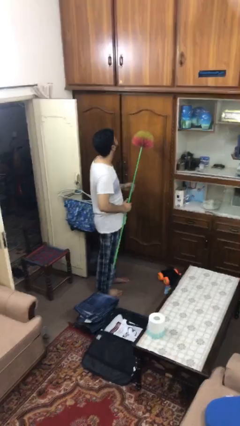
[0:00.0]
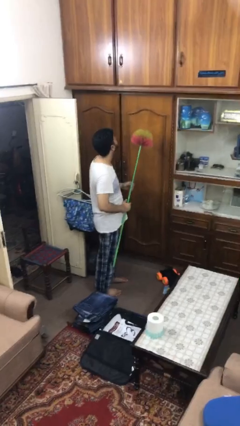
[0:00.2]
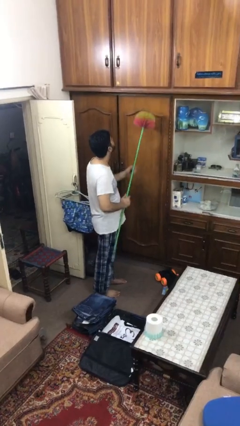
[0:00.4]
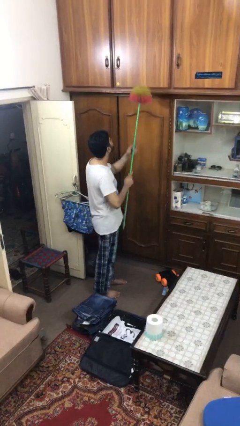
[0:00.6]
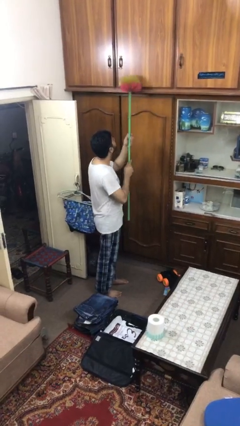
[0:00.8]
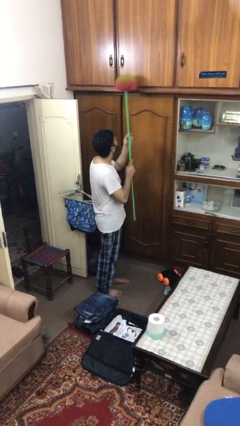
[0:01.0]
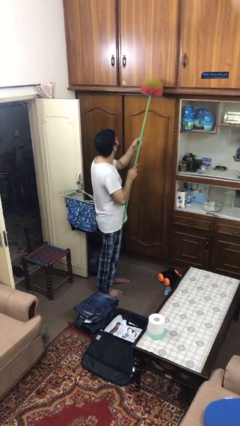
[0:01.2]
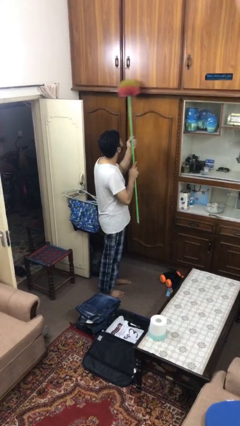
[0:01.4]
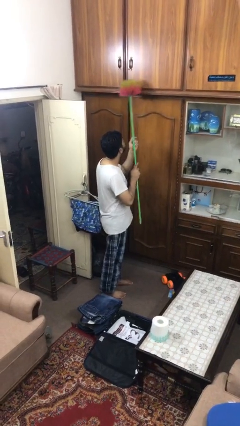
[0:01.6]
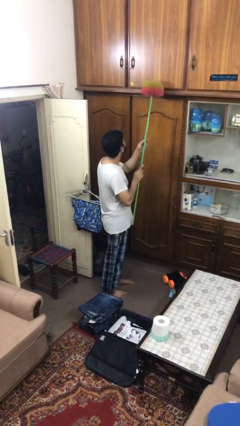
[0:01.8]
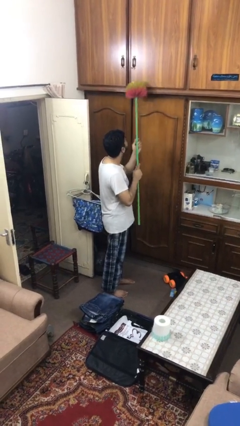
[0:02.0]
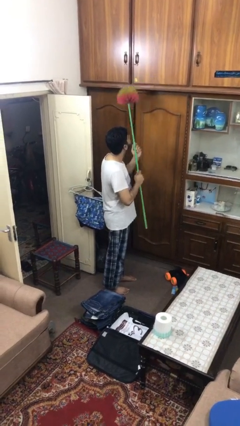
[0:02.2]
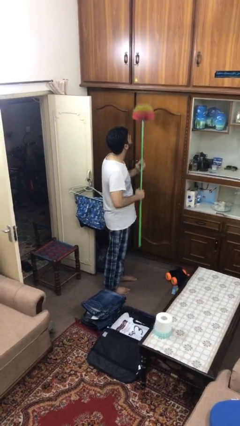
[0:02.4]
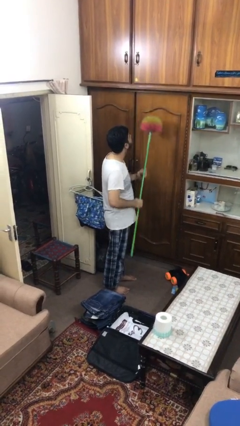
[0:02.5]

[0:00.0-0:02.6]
person dusts furniture

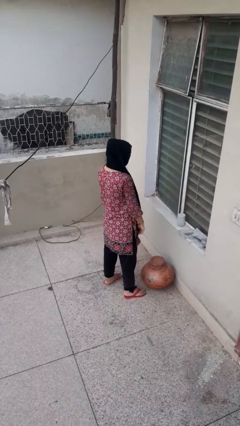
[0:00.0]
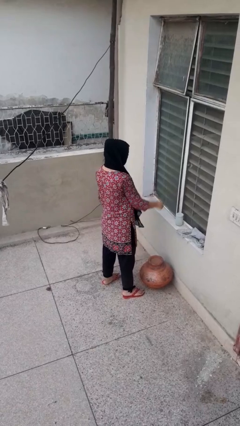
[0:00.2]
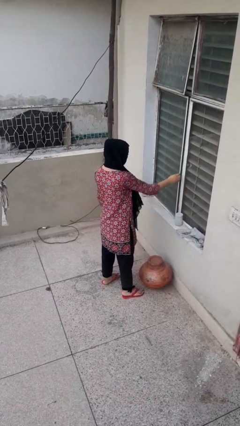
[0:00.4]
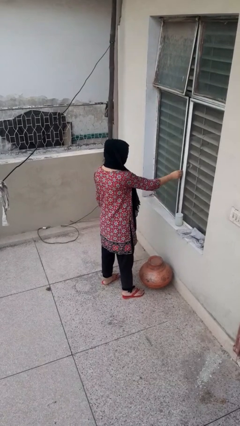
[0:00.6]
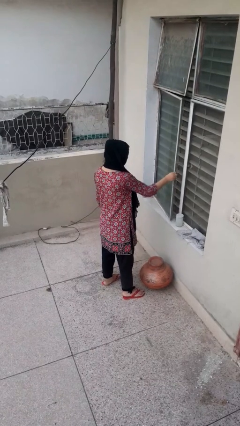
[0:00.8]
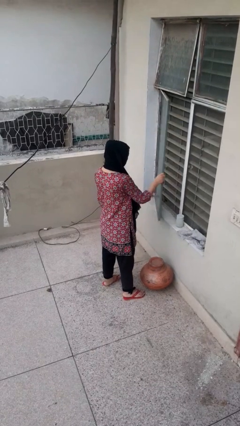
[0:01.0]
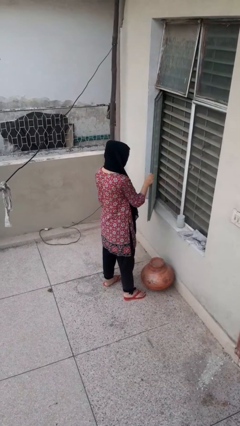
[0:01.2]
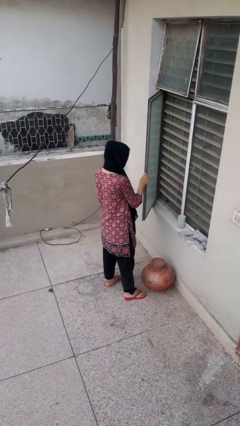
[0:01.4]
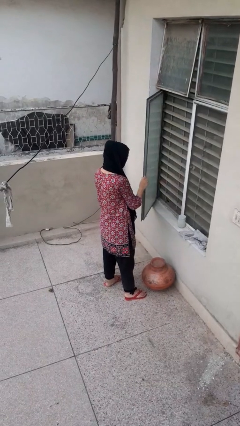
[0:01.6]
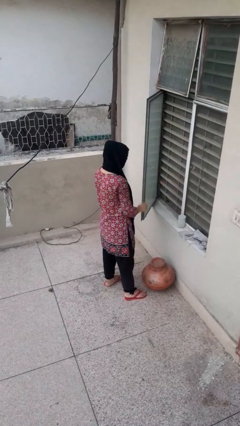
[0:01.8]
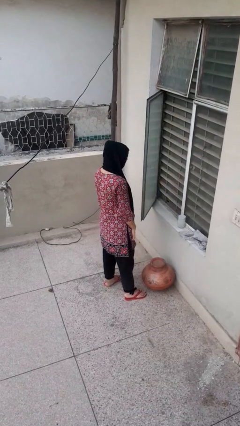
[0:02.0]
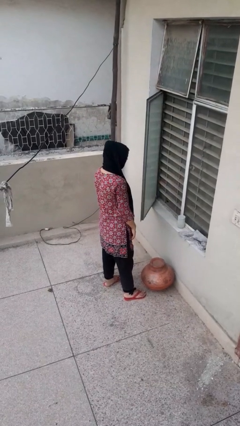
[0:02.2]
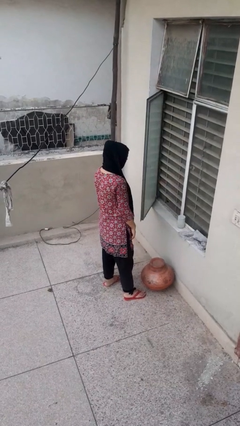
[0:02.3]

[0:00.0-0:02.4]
person opens home window

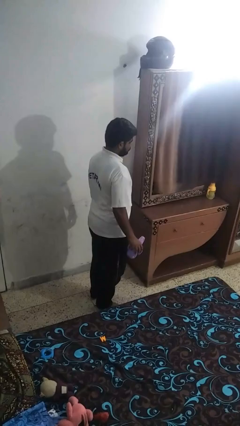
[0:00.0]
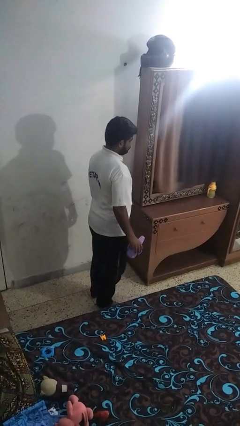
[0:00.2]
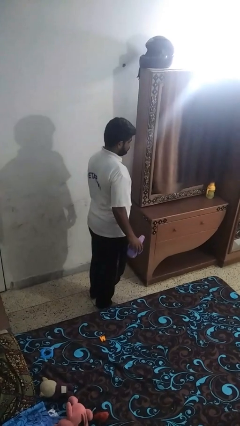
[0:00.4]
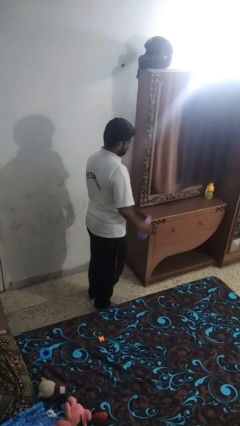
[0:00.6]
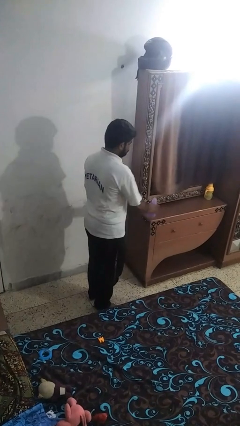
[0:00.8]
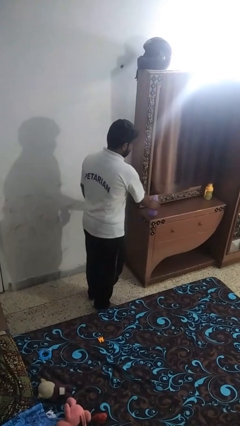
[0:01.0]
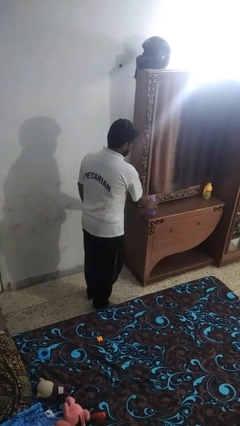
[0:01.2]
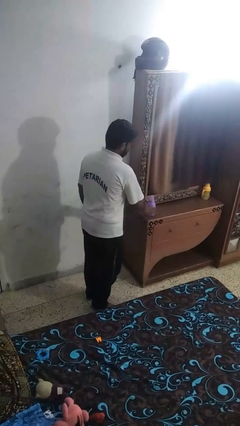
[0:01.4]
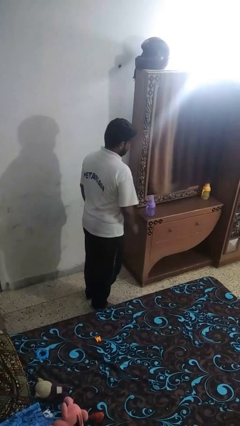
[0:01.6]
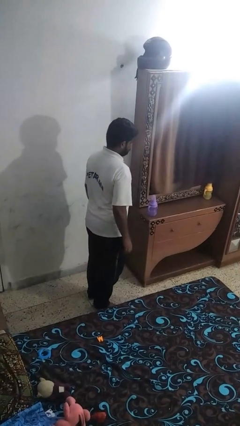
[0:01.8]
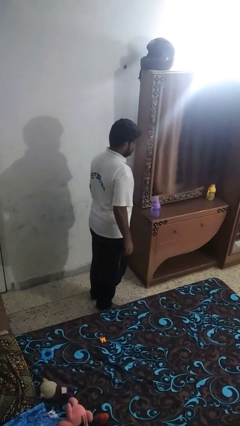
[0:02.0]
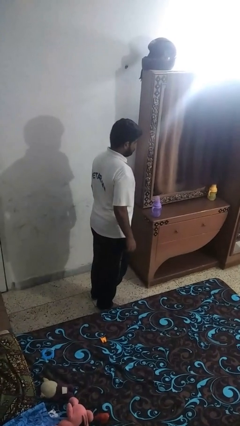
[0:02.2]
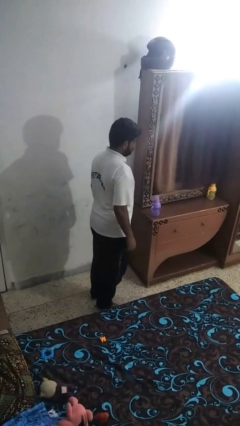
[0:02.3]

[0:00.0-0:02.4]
person puts down object on countertop

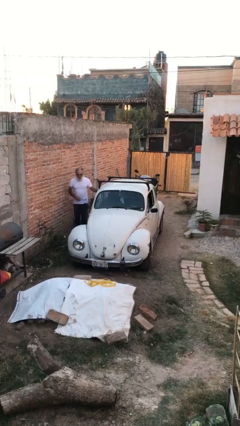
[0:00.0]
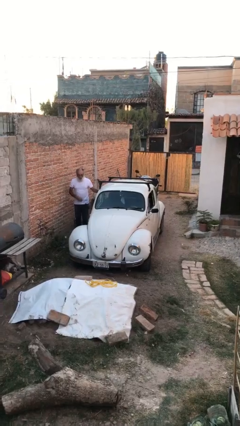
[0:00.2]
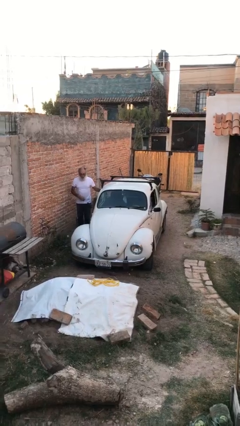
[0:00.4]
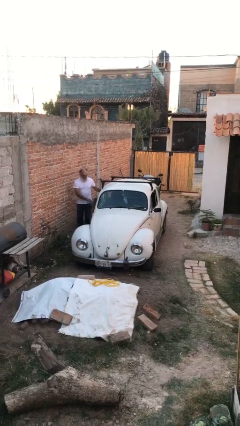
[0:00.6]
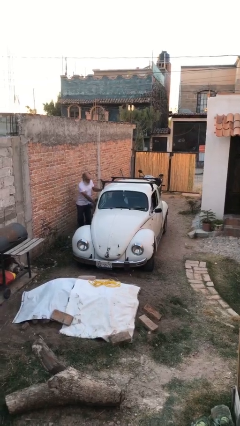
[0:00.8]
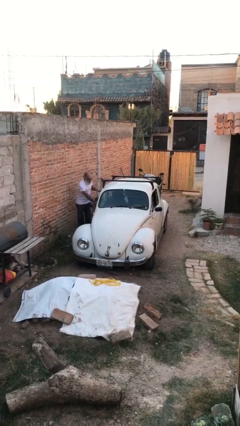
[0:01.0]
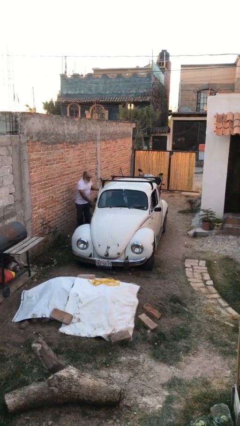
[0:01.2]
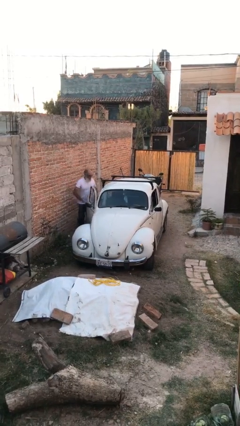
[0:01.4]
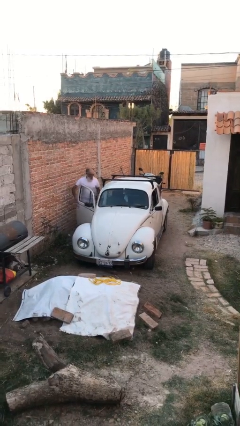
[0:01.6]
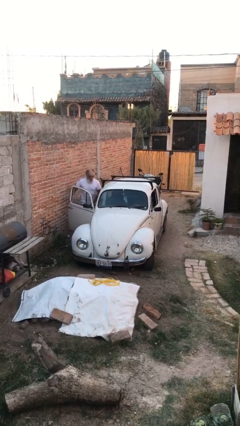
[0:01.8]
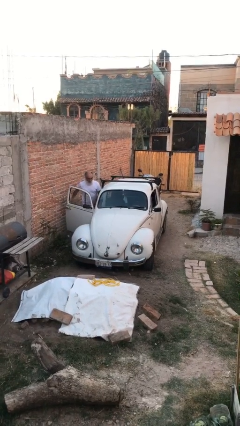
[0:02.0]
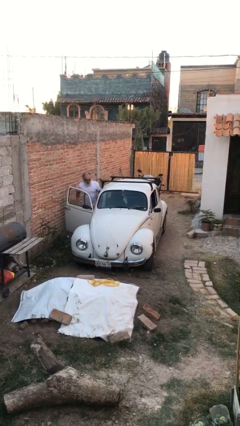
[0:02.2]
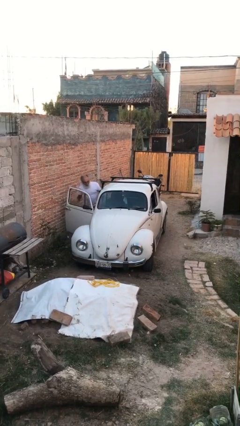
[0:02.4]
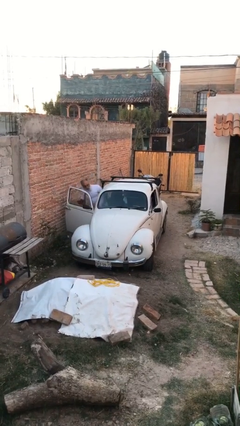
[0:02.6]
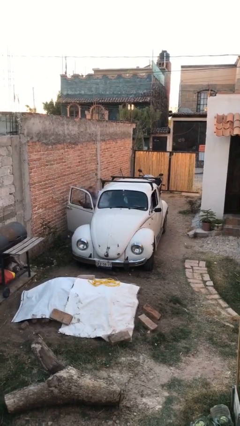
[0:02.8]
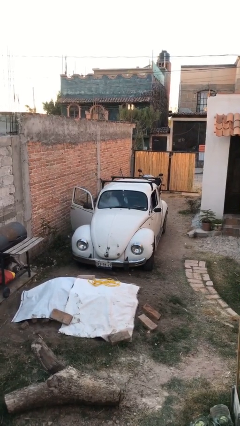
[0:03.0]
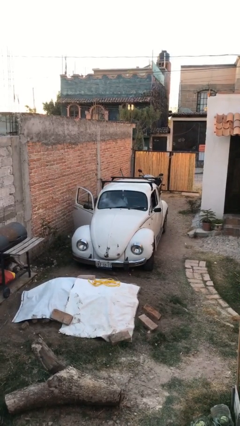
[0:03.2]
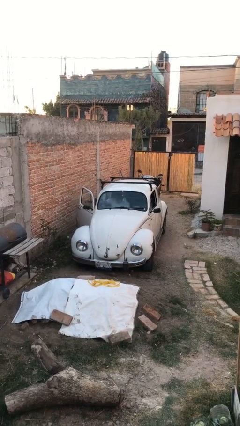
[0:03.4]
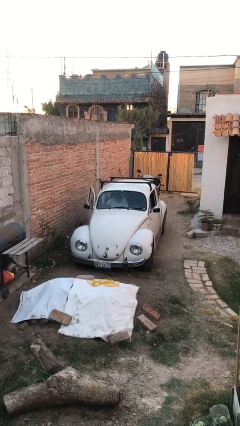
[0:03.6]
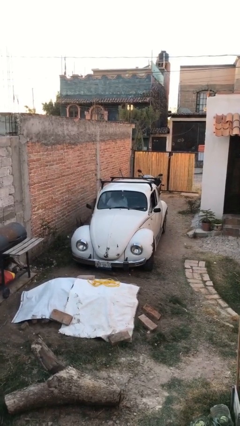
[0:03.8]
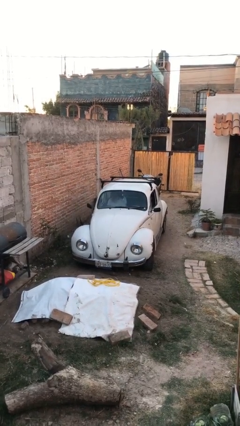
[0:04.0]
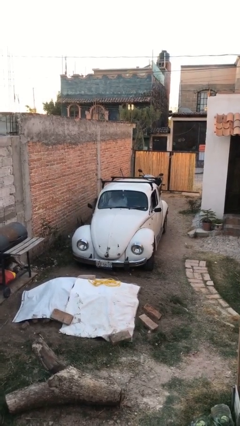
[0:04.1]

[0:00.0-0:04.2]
car picks up person

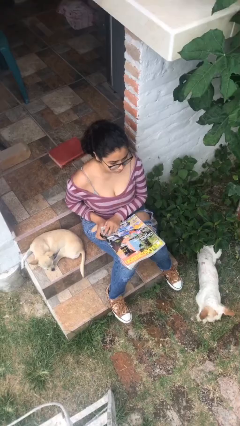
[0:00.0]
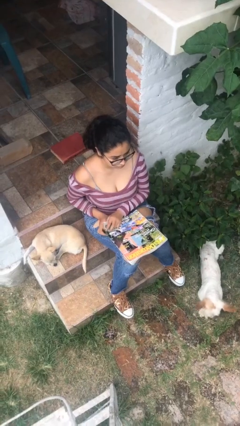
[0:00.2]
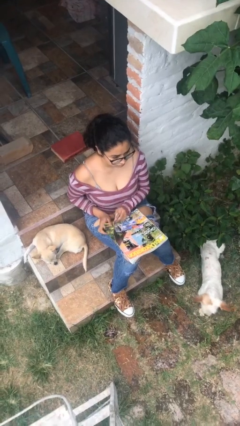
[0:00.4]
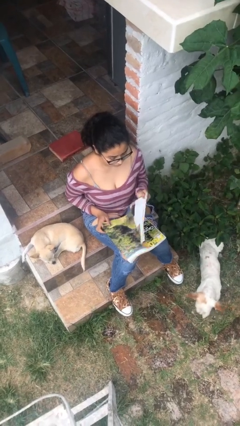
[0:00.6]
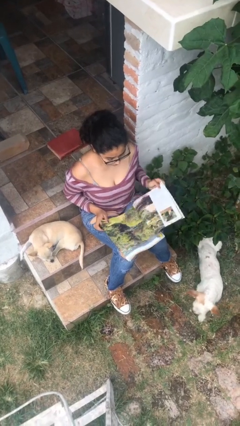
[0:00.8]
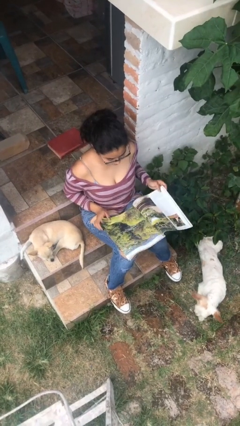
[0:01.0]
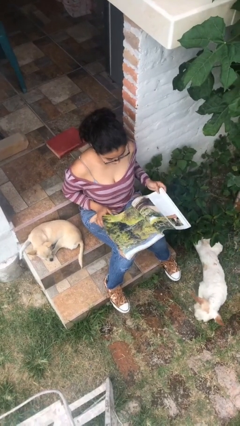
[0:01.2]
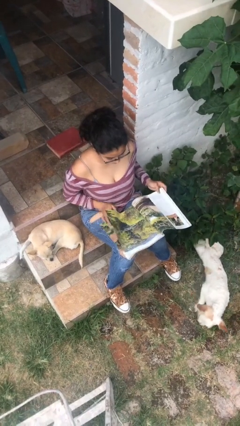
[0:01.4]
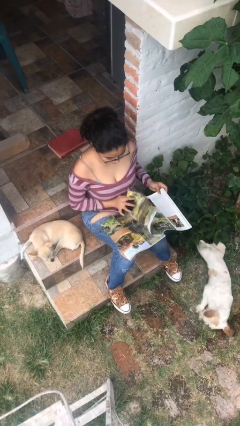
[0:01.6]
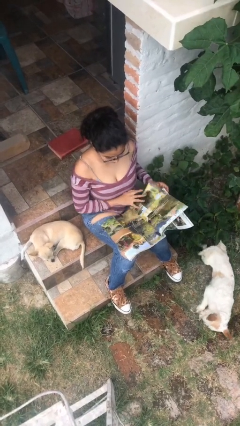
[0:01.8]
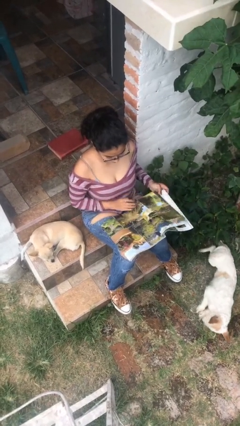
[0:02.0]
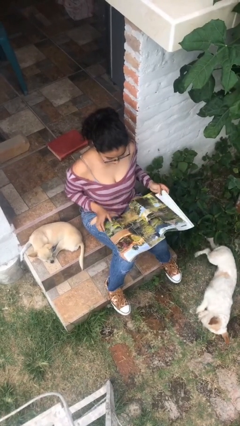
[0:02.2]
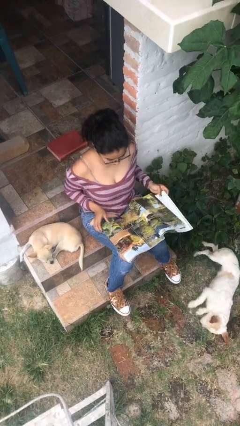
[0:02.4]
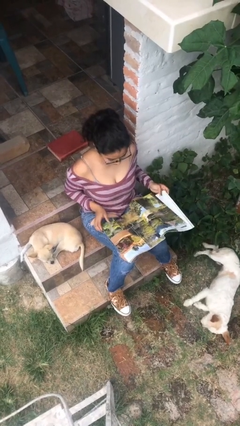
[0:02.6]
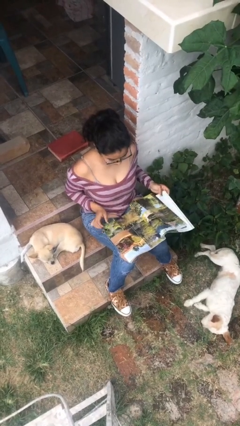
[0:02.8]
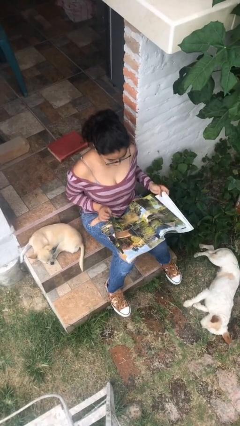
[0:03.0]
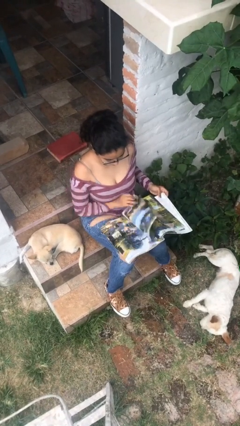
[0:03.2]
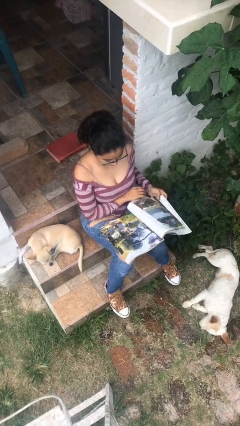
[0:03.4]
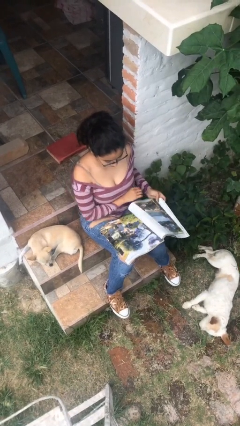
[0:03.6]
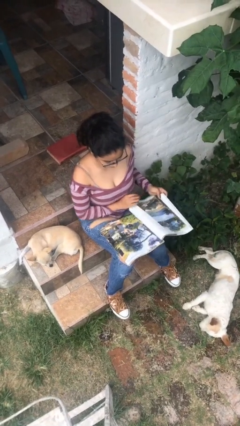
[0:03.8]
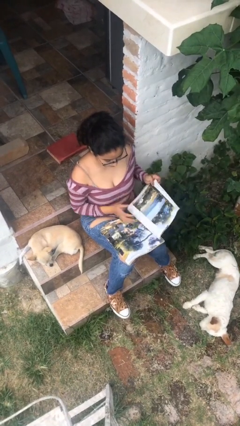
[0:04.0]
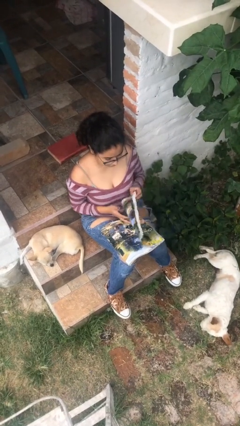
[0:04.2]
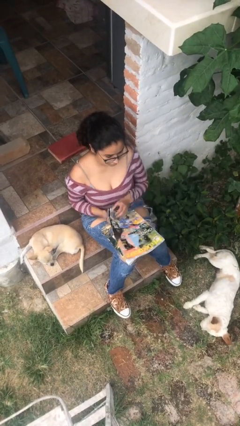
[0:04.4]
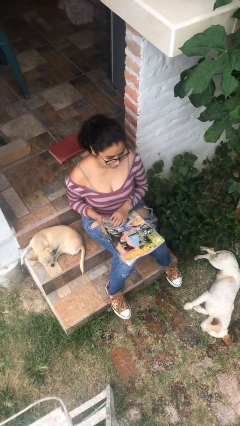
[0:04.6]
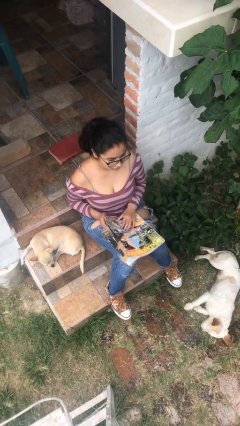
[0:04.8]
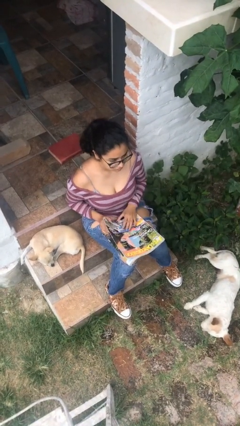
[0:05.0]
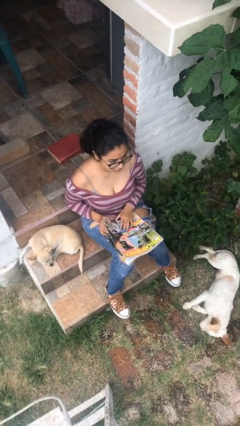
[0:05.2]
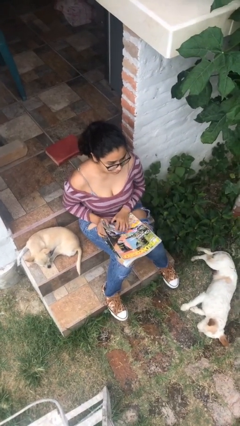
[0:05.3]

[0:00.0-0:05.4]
person reads magazine

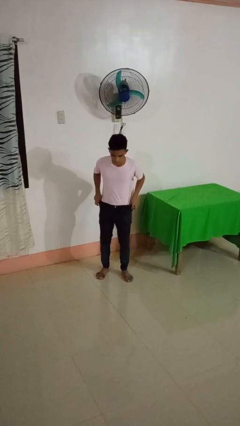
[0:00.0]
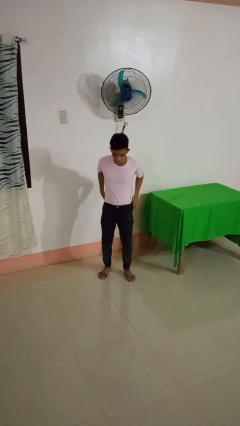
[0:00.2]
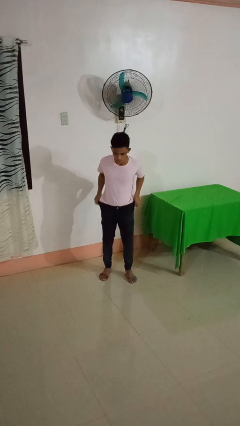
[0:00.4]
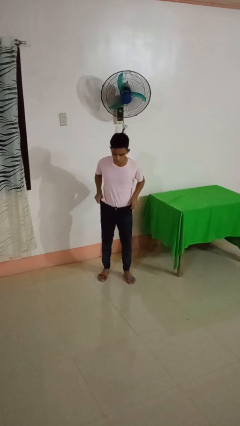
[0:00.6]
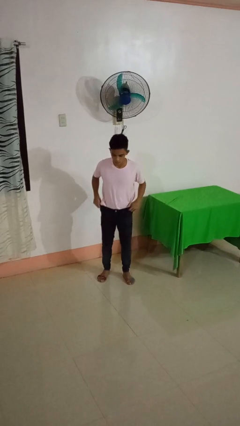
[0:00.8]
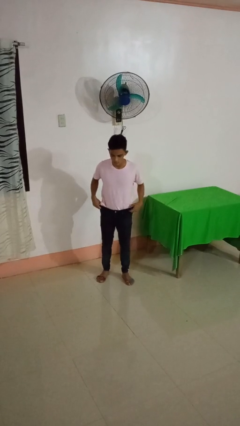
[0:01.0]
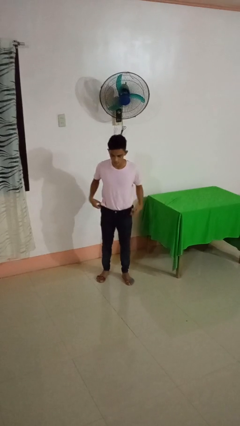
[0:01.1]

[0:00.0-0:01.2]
person hikes up pants
